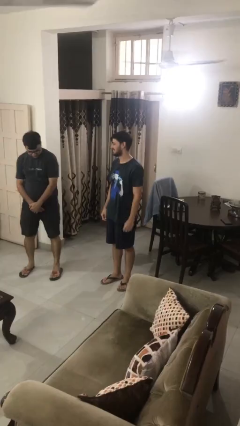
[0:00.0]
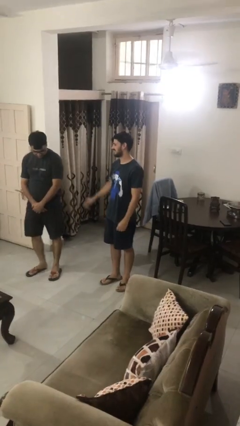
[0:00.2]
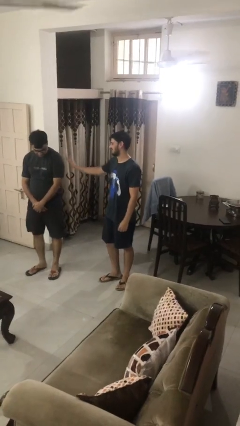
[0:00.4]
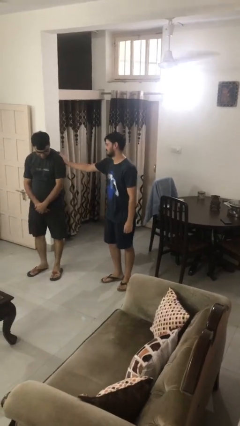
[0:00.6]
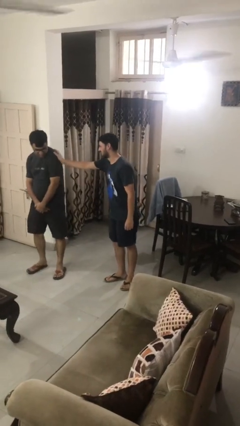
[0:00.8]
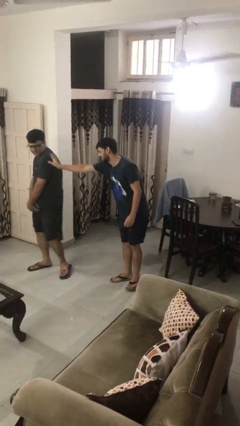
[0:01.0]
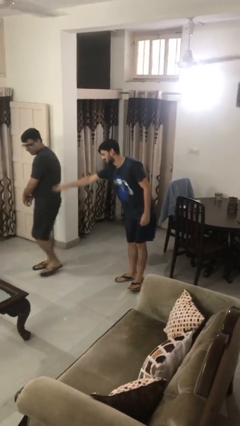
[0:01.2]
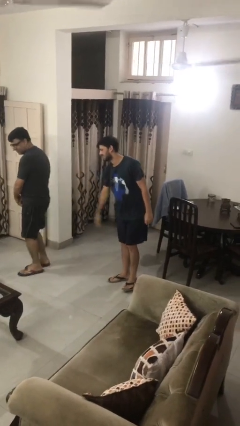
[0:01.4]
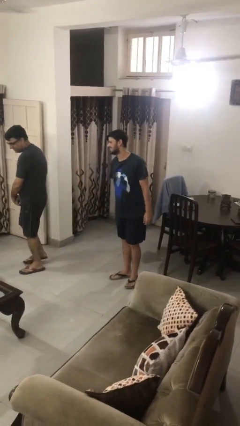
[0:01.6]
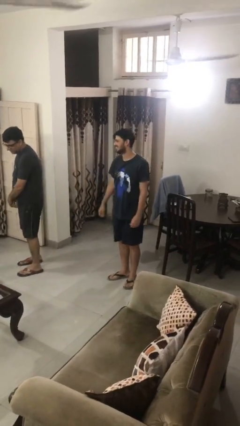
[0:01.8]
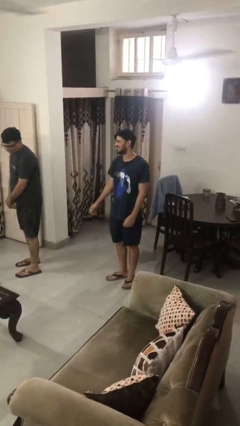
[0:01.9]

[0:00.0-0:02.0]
person shoves person

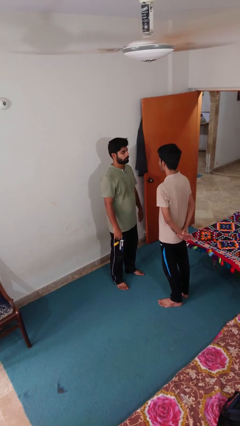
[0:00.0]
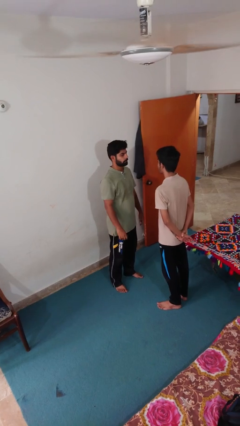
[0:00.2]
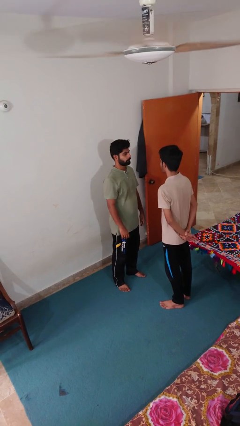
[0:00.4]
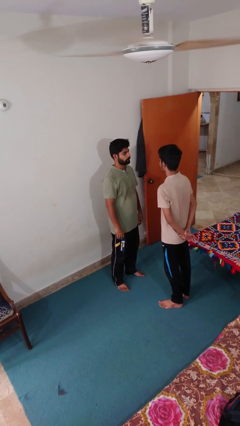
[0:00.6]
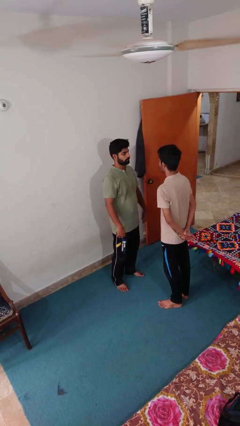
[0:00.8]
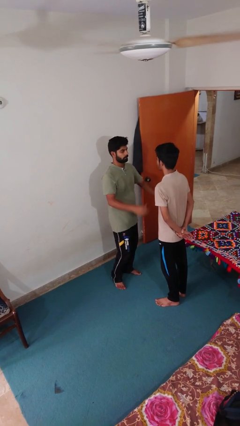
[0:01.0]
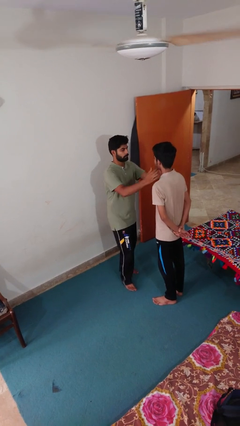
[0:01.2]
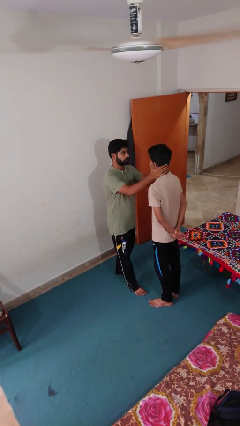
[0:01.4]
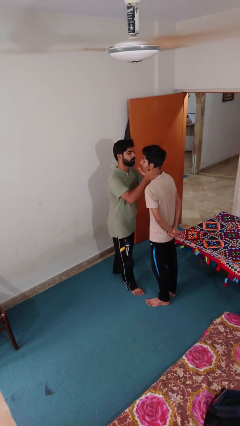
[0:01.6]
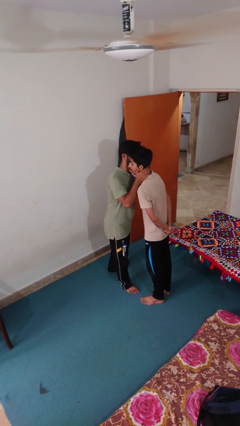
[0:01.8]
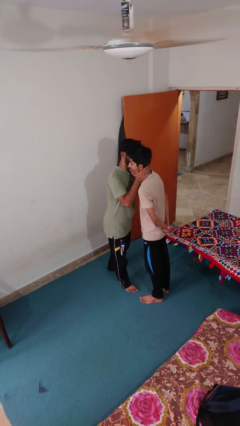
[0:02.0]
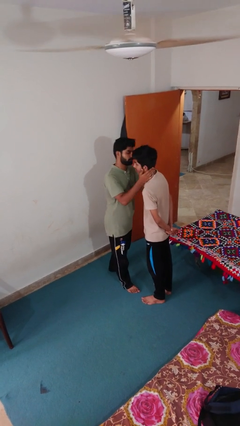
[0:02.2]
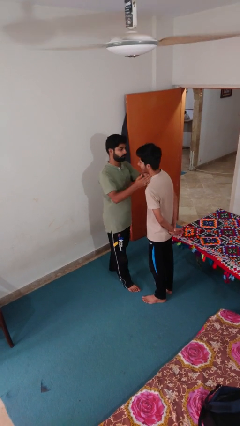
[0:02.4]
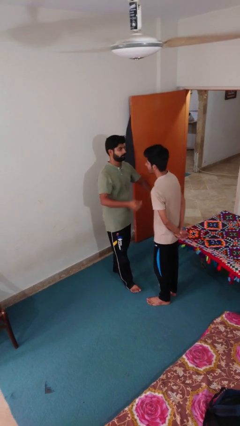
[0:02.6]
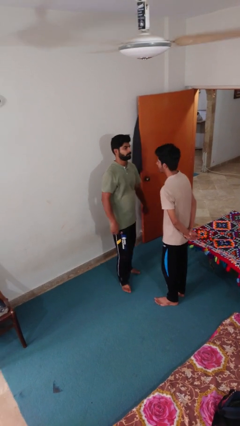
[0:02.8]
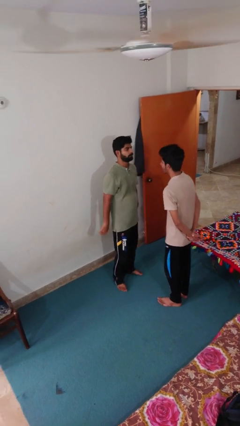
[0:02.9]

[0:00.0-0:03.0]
person kisses cheek of person

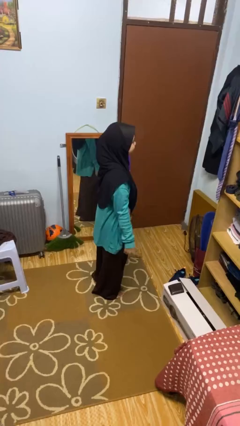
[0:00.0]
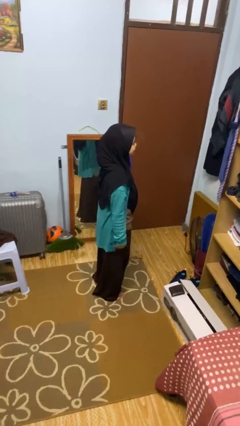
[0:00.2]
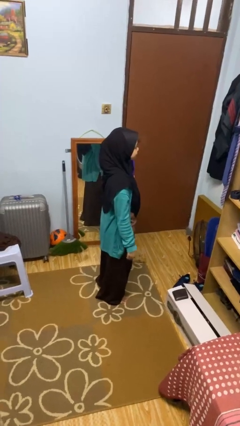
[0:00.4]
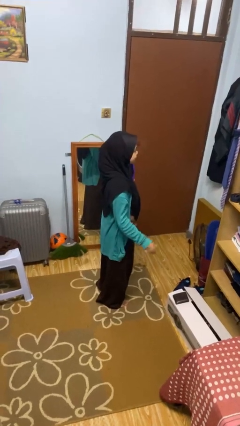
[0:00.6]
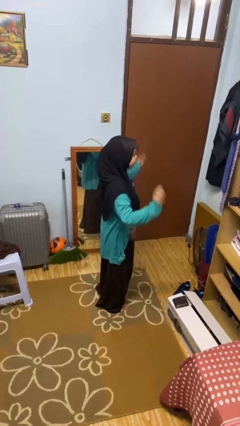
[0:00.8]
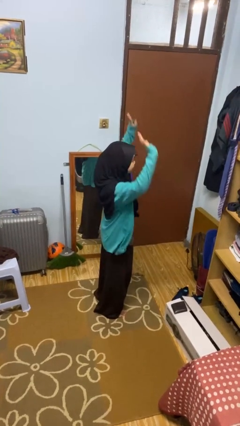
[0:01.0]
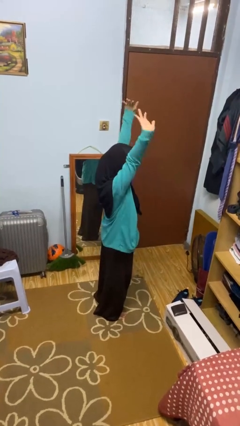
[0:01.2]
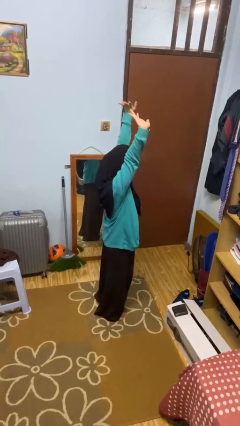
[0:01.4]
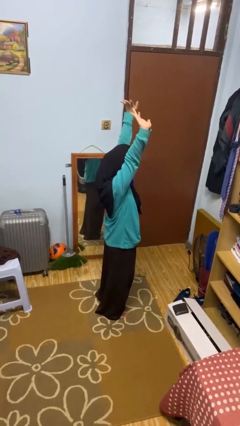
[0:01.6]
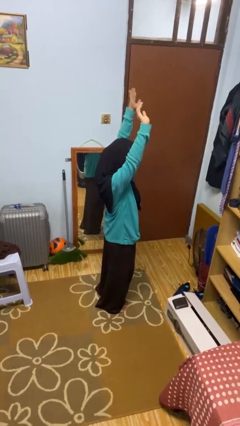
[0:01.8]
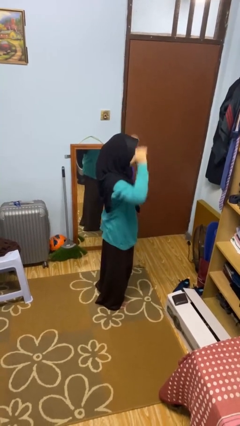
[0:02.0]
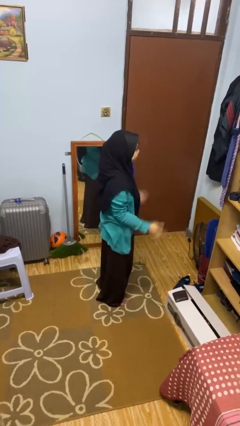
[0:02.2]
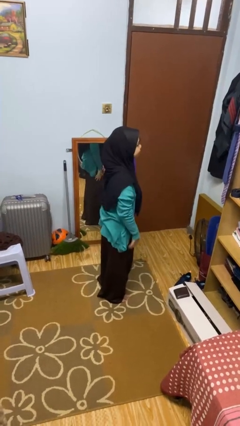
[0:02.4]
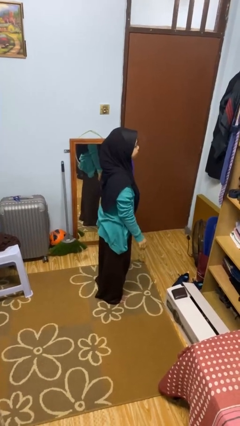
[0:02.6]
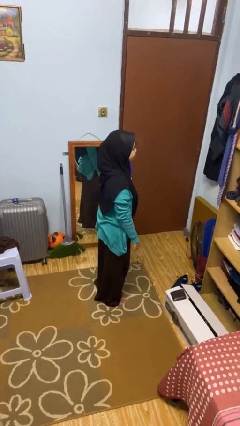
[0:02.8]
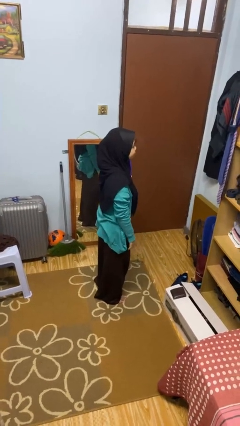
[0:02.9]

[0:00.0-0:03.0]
person stretches arms over head

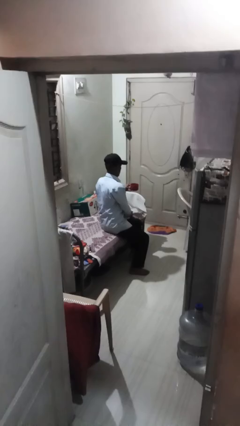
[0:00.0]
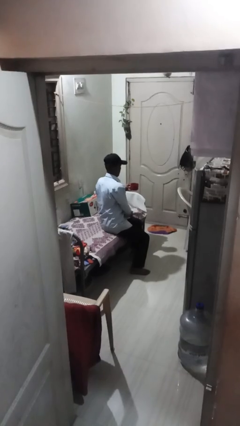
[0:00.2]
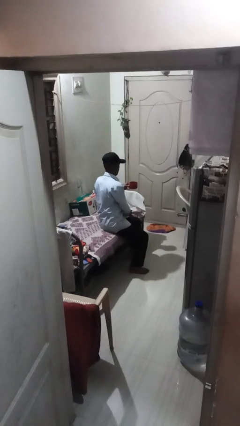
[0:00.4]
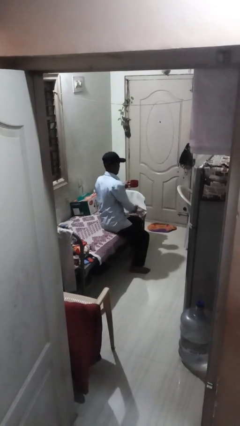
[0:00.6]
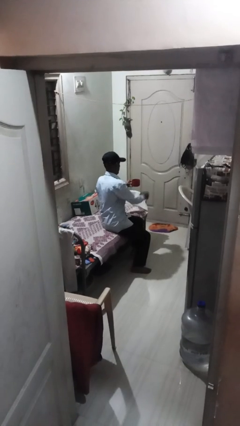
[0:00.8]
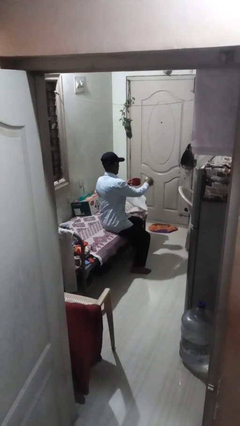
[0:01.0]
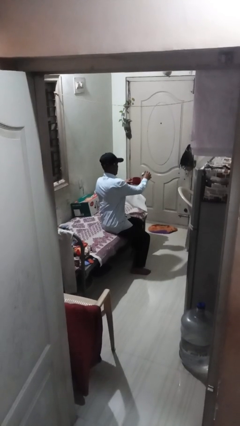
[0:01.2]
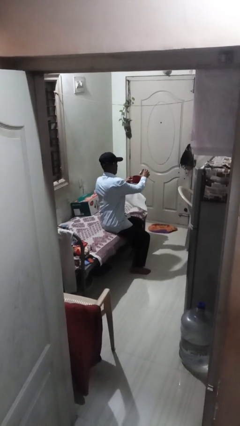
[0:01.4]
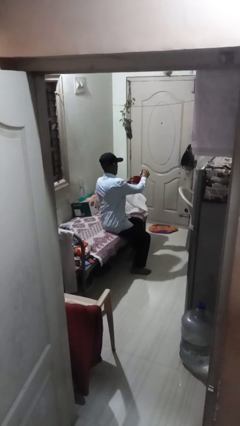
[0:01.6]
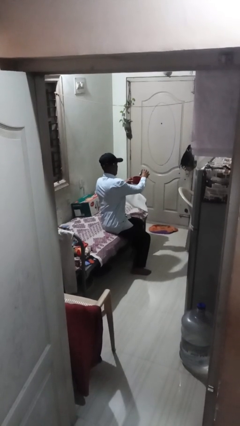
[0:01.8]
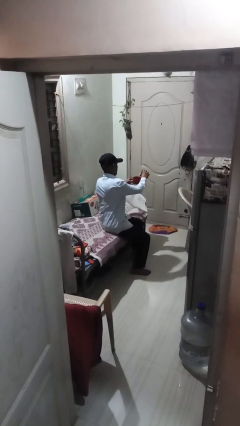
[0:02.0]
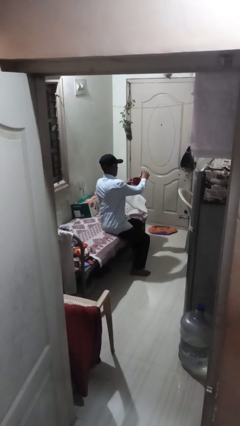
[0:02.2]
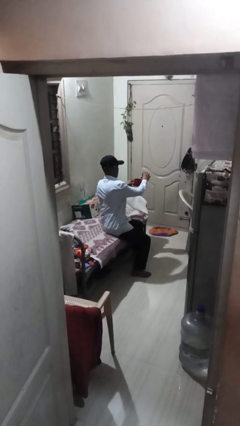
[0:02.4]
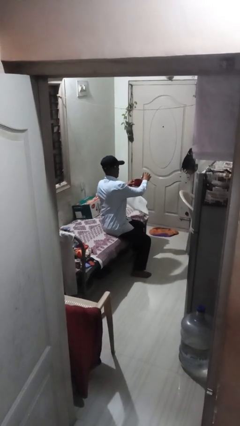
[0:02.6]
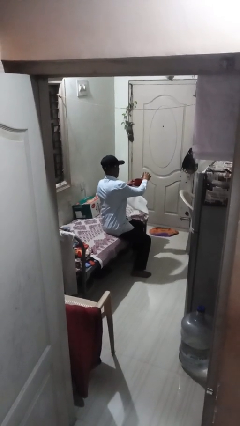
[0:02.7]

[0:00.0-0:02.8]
person pours coffee into mug

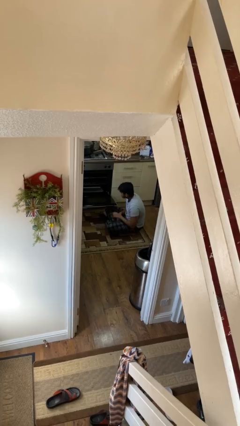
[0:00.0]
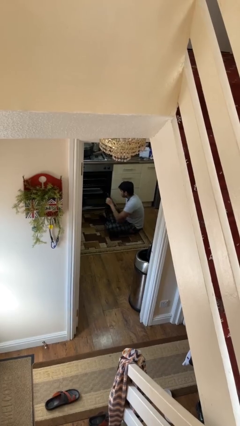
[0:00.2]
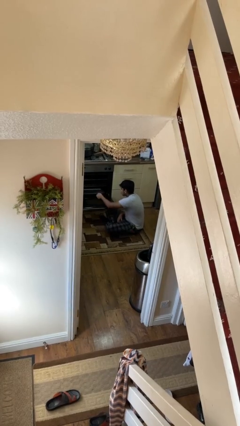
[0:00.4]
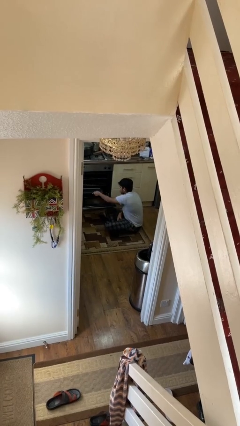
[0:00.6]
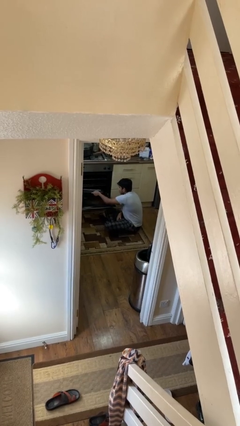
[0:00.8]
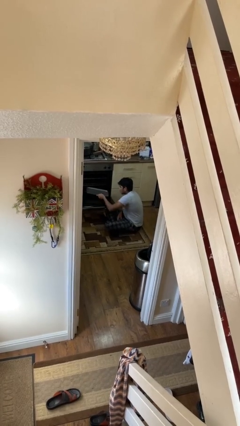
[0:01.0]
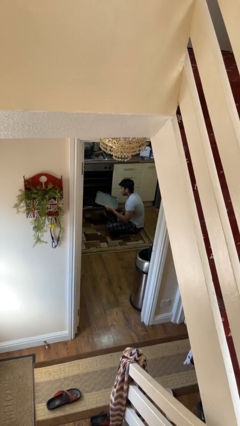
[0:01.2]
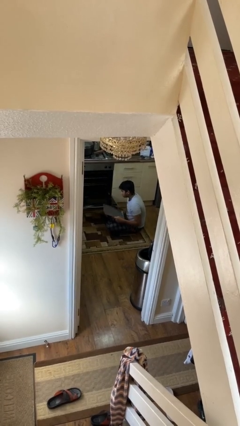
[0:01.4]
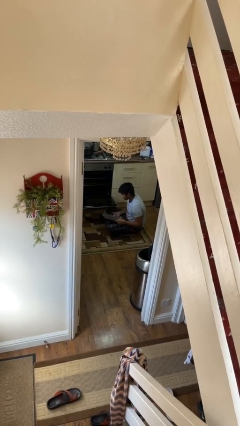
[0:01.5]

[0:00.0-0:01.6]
person takes object from oven

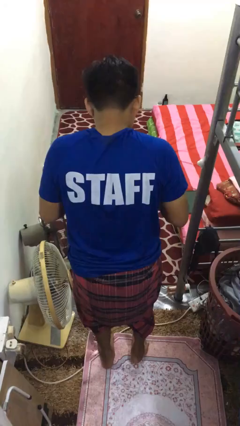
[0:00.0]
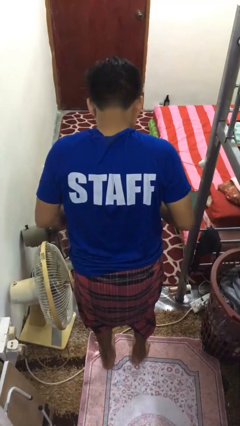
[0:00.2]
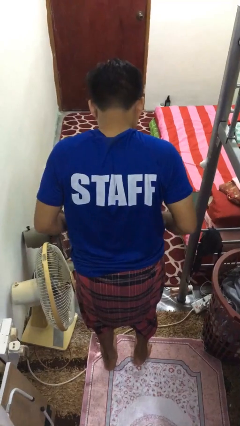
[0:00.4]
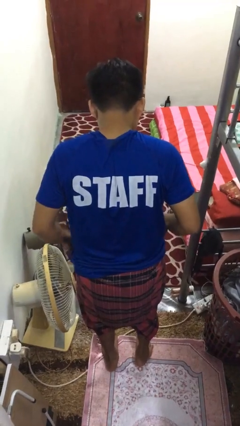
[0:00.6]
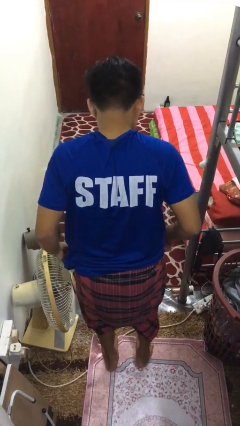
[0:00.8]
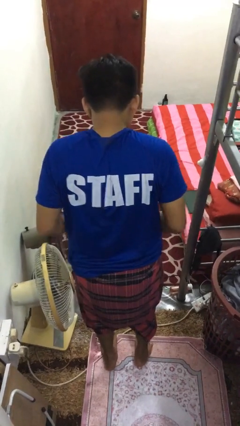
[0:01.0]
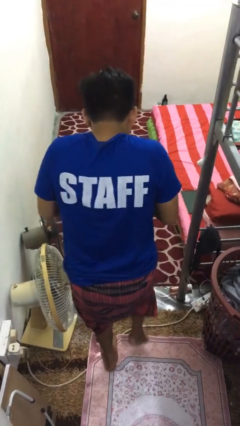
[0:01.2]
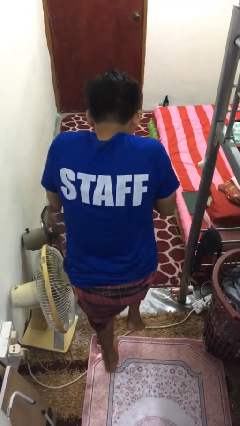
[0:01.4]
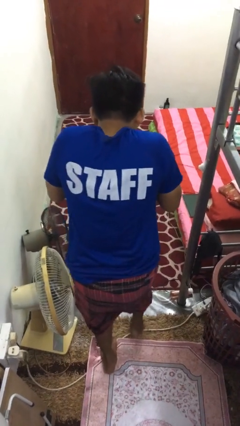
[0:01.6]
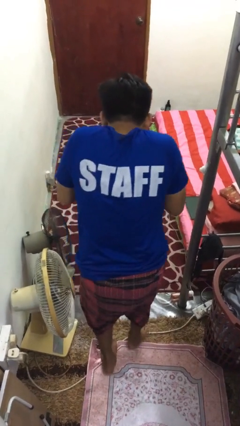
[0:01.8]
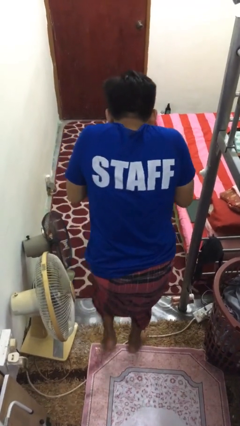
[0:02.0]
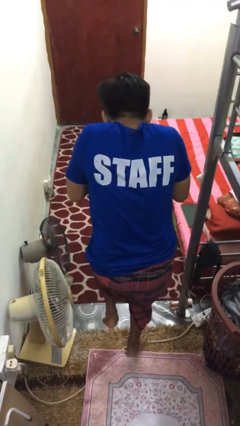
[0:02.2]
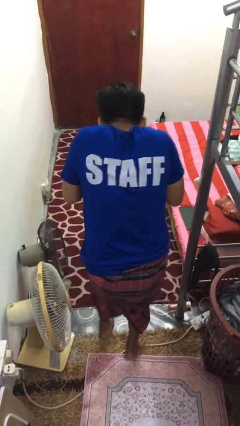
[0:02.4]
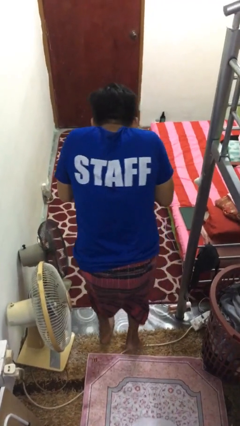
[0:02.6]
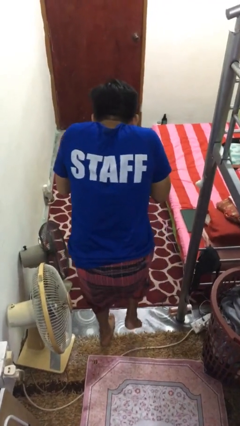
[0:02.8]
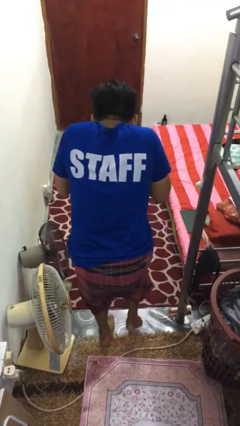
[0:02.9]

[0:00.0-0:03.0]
person walks tiptoe

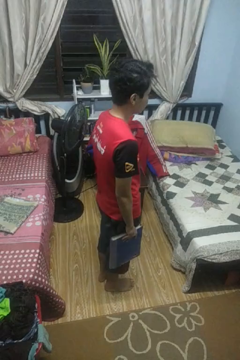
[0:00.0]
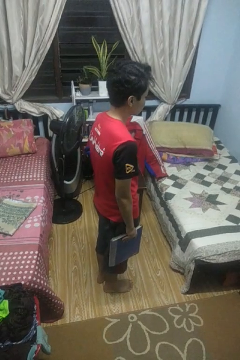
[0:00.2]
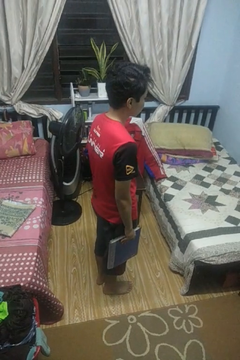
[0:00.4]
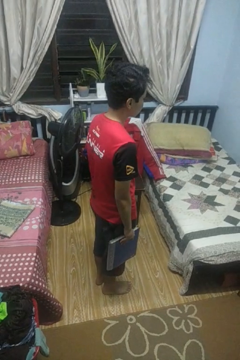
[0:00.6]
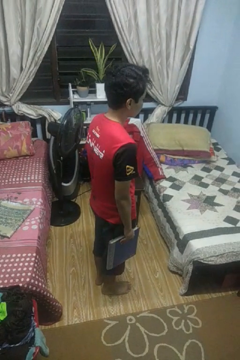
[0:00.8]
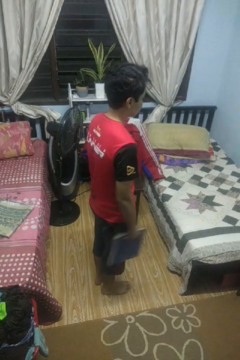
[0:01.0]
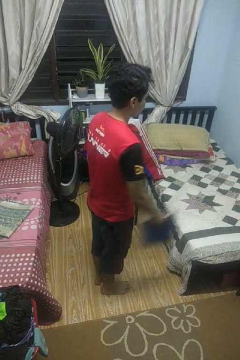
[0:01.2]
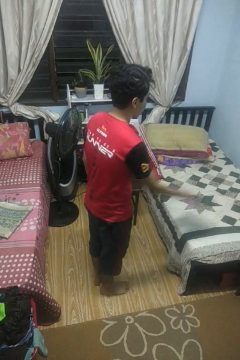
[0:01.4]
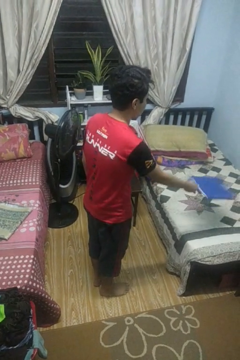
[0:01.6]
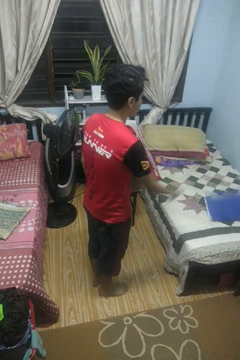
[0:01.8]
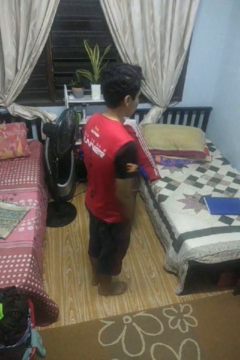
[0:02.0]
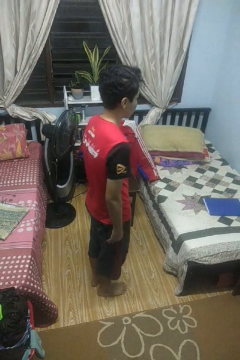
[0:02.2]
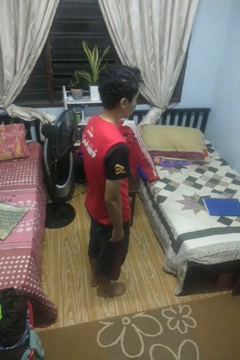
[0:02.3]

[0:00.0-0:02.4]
person throws object on bed
